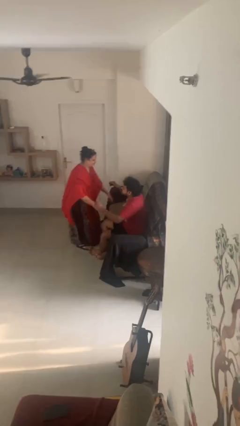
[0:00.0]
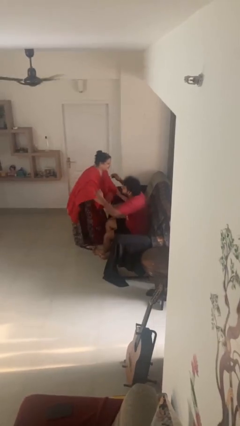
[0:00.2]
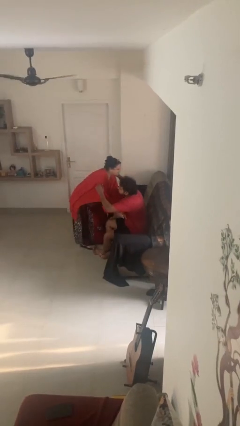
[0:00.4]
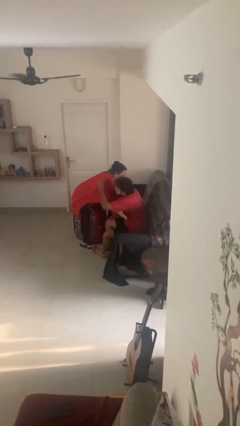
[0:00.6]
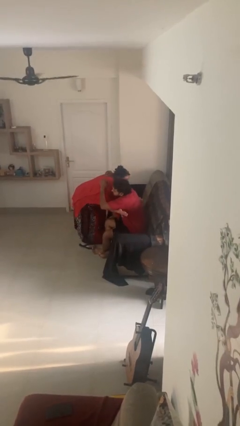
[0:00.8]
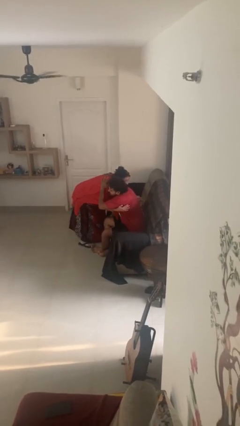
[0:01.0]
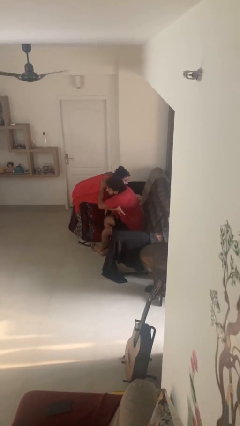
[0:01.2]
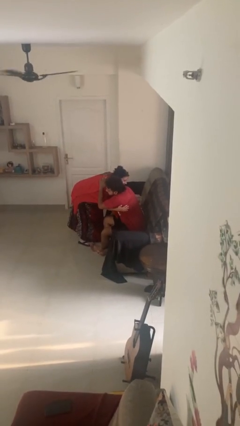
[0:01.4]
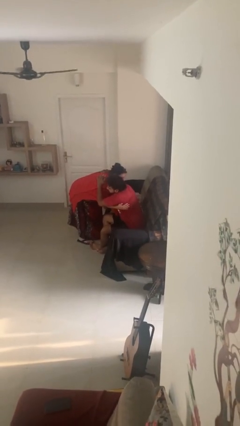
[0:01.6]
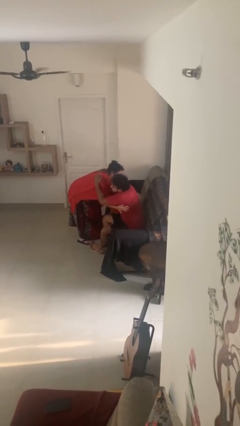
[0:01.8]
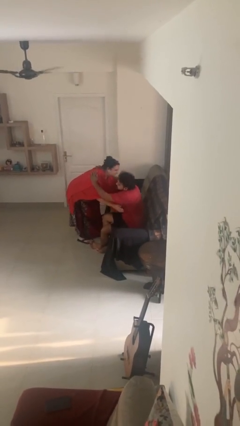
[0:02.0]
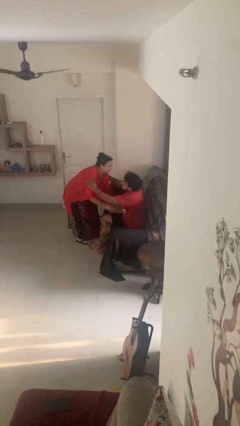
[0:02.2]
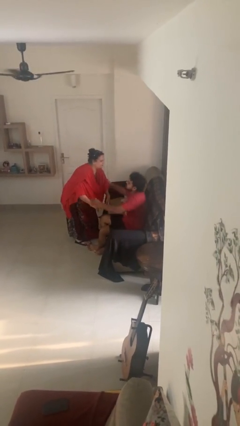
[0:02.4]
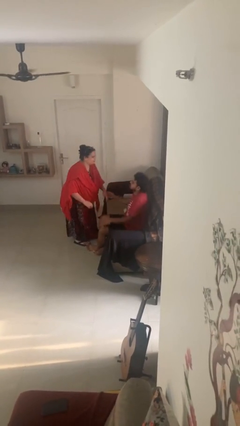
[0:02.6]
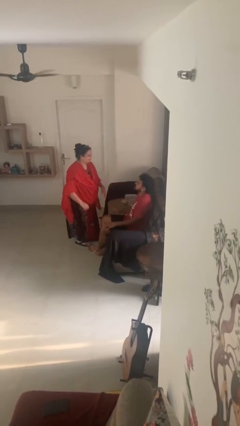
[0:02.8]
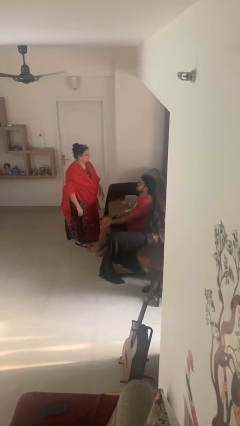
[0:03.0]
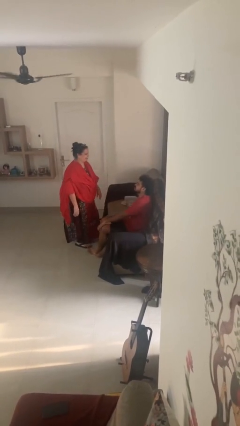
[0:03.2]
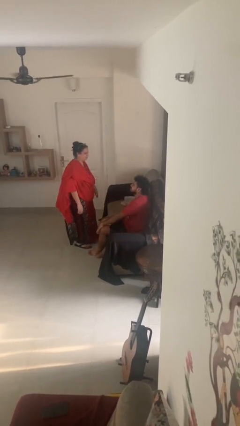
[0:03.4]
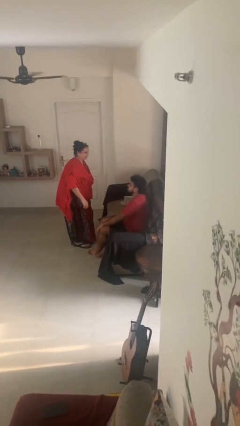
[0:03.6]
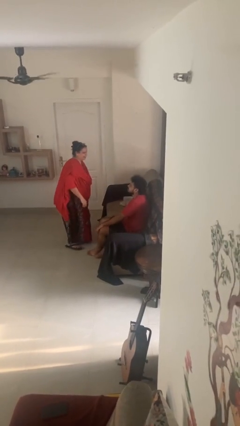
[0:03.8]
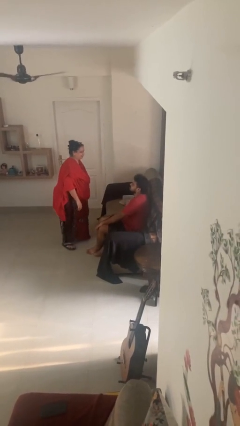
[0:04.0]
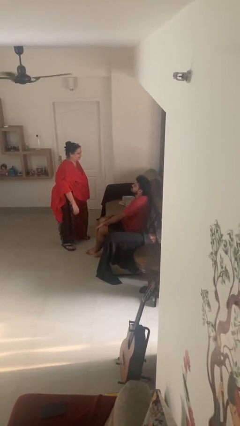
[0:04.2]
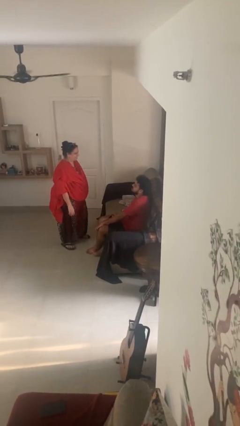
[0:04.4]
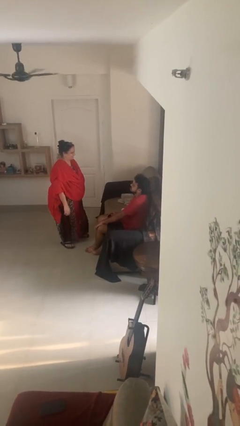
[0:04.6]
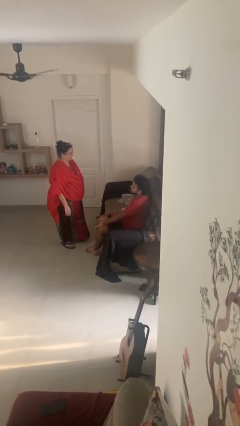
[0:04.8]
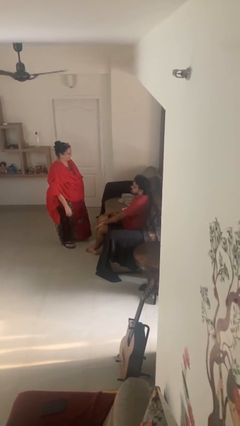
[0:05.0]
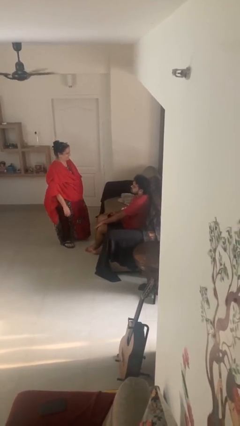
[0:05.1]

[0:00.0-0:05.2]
person embraces person

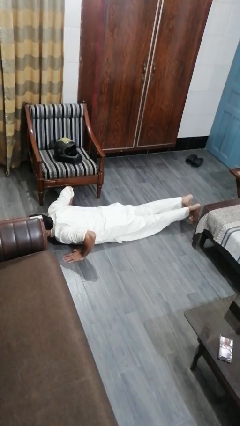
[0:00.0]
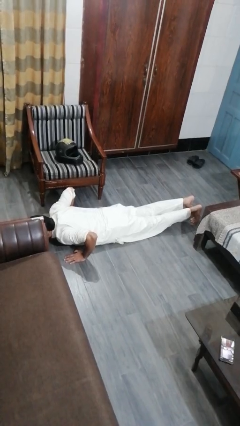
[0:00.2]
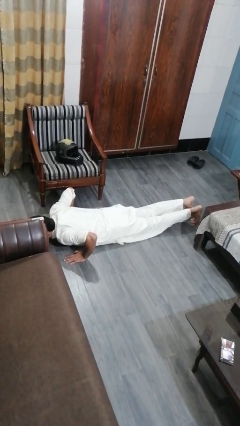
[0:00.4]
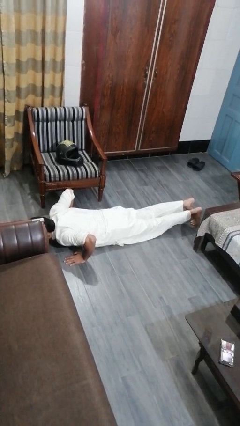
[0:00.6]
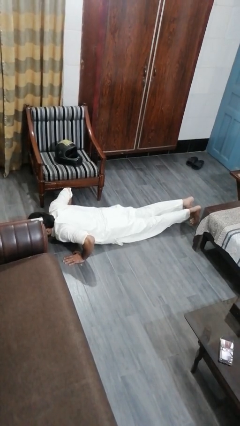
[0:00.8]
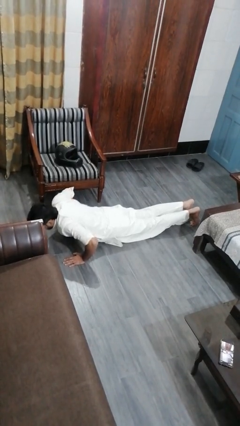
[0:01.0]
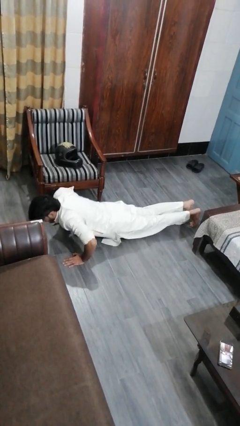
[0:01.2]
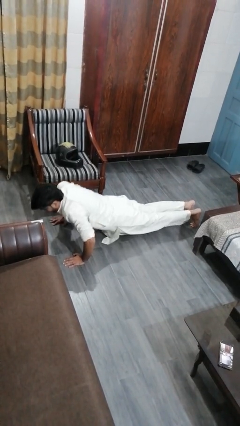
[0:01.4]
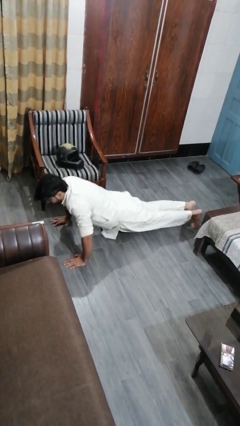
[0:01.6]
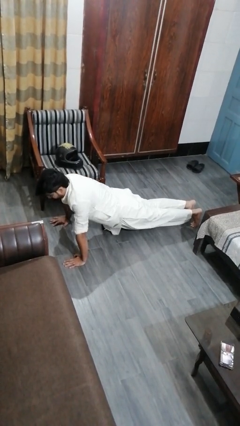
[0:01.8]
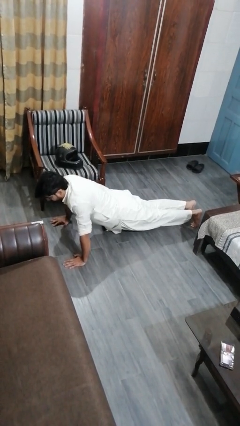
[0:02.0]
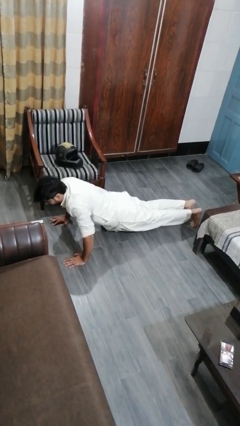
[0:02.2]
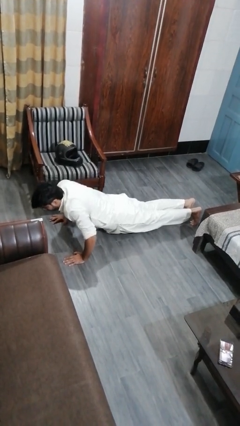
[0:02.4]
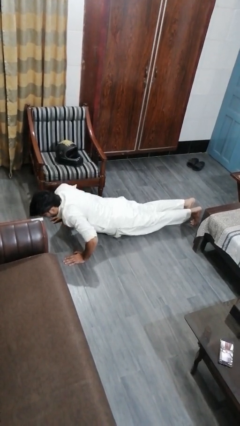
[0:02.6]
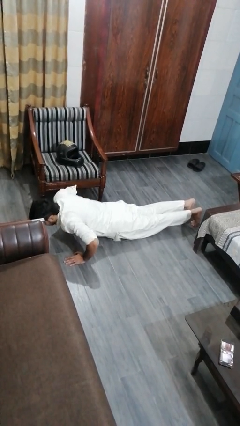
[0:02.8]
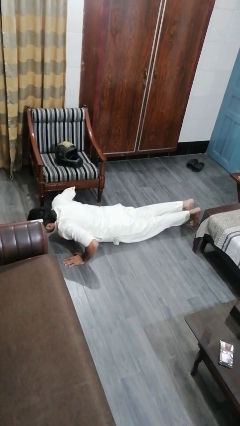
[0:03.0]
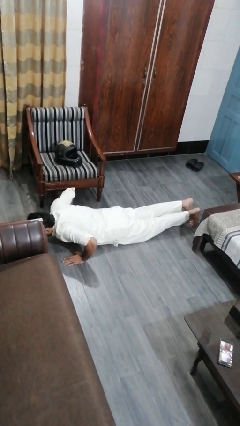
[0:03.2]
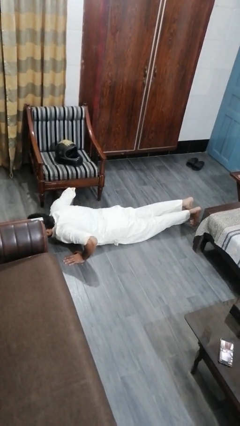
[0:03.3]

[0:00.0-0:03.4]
person exercises with pushup

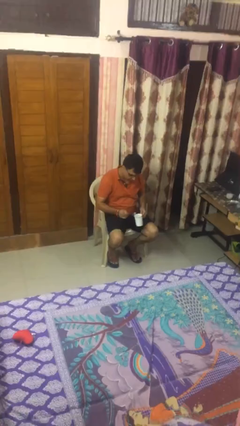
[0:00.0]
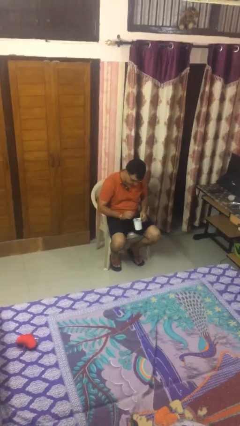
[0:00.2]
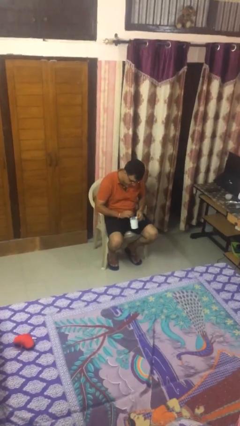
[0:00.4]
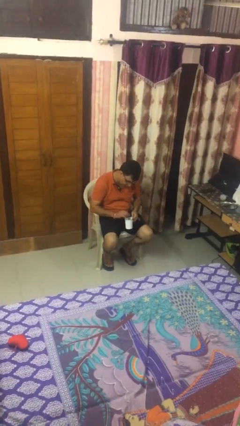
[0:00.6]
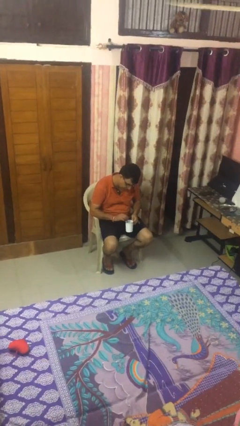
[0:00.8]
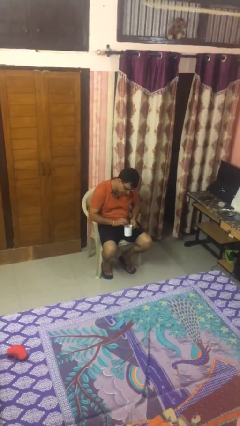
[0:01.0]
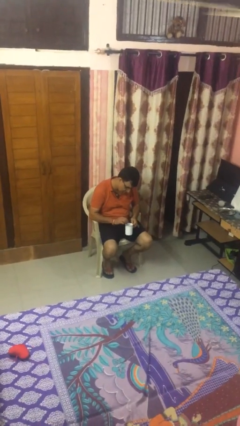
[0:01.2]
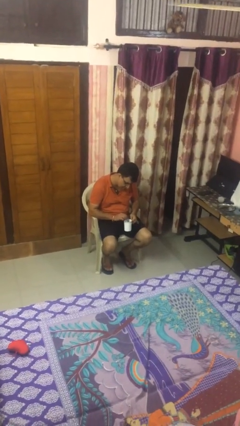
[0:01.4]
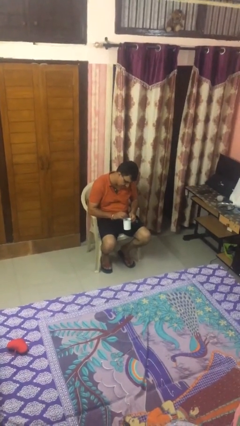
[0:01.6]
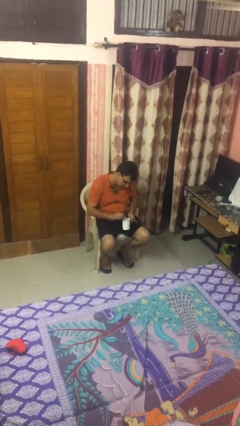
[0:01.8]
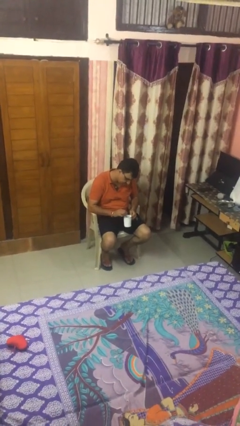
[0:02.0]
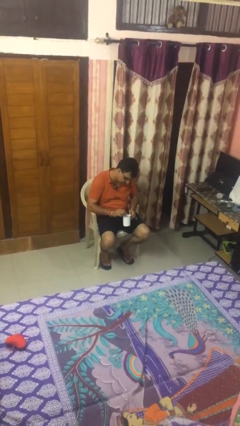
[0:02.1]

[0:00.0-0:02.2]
person stirs mug

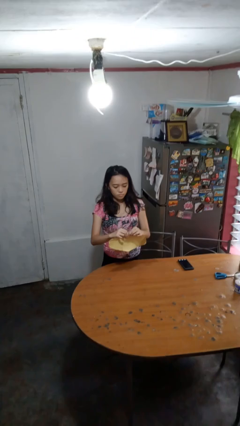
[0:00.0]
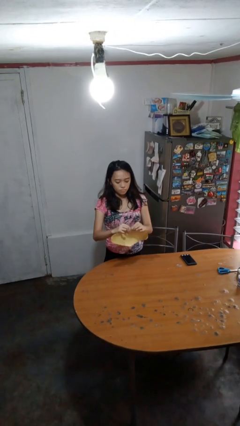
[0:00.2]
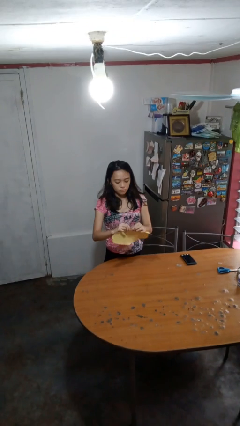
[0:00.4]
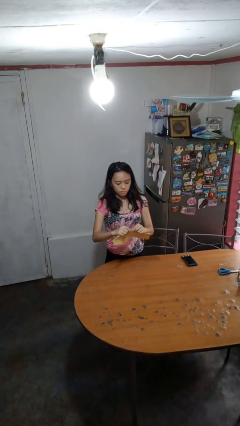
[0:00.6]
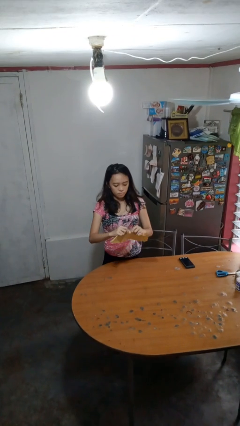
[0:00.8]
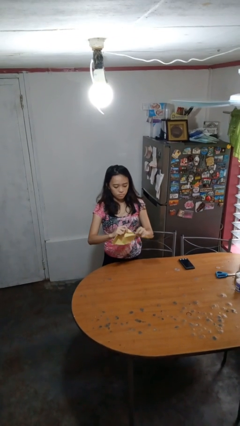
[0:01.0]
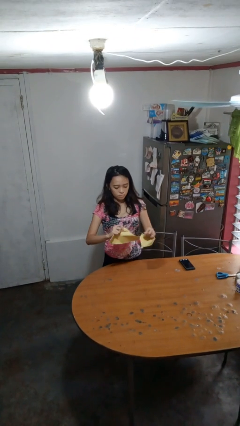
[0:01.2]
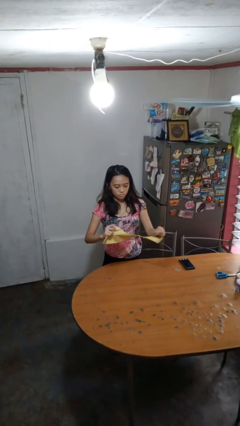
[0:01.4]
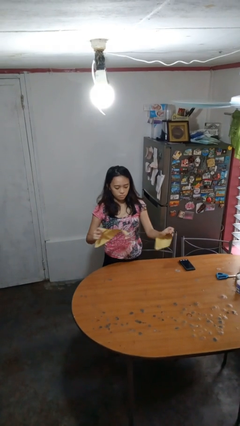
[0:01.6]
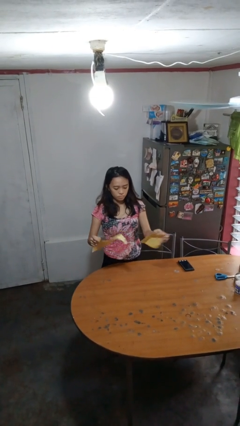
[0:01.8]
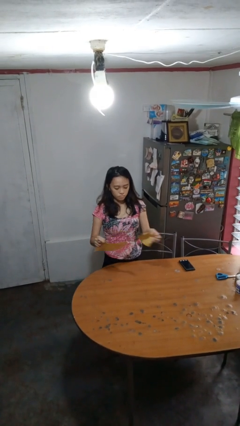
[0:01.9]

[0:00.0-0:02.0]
person tears paper

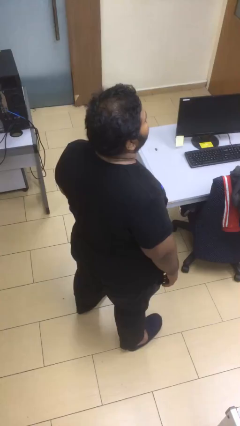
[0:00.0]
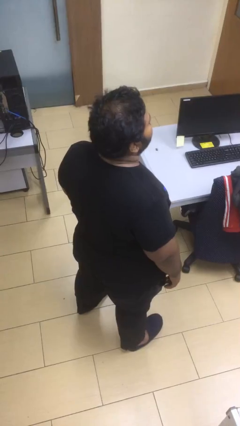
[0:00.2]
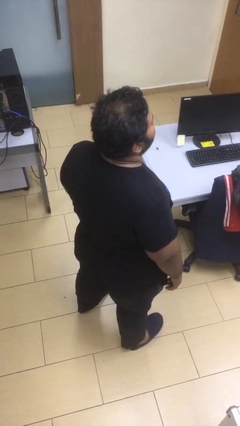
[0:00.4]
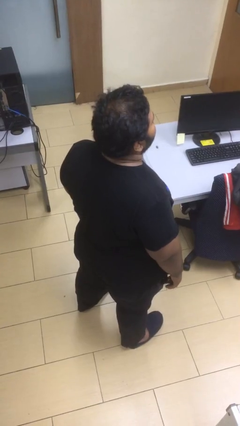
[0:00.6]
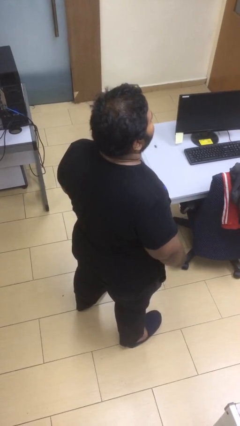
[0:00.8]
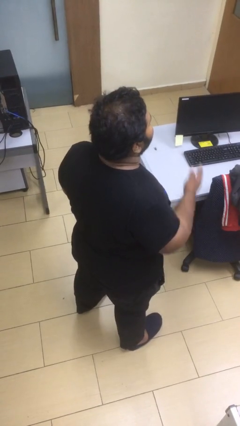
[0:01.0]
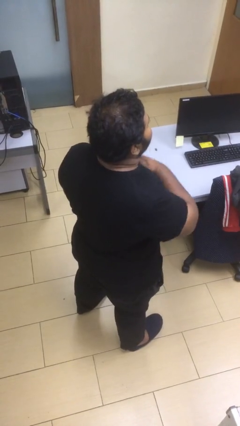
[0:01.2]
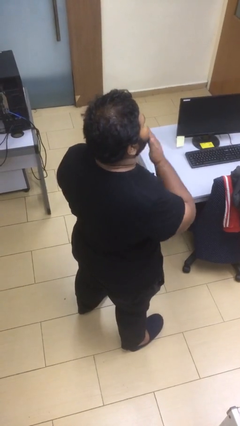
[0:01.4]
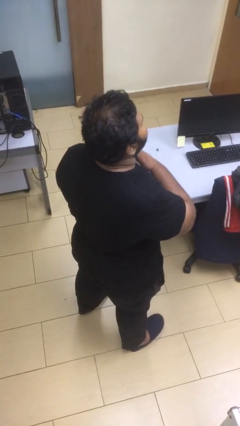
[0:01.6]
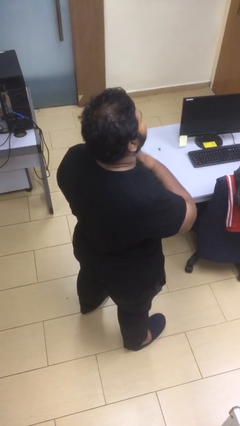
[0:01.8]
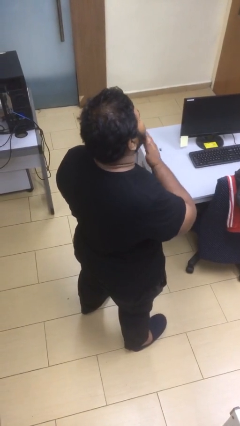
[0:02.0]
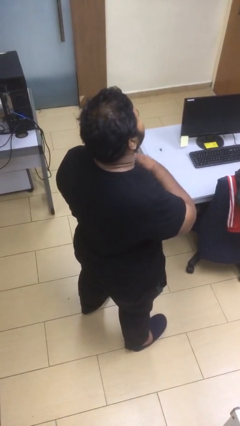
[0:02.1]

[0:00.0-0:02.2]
person drums on chest

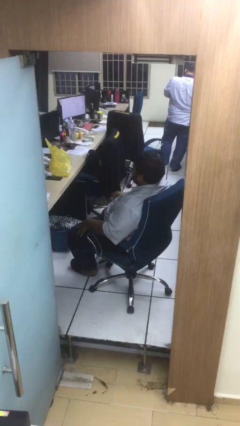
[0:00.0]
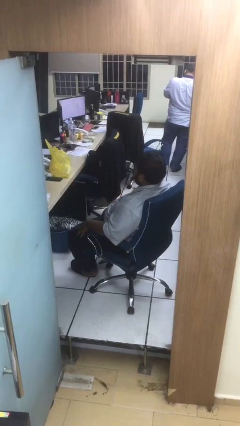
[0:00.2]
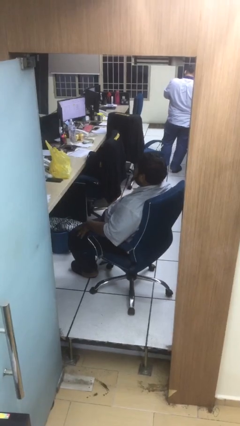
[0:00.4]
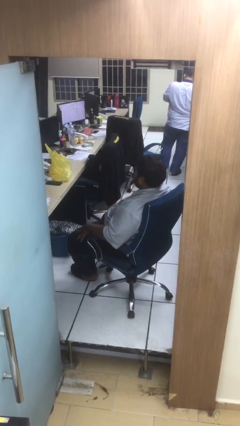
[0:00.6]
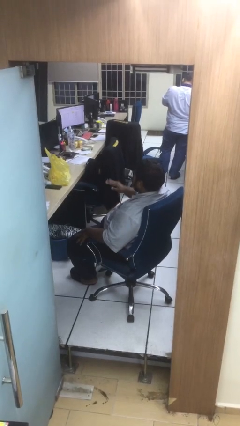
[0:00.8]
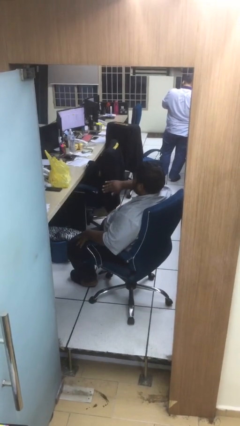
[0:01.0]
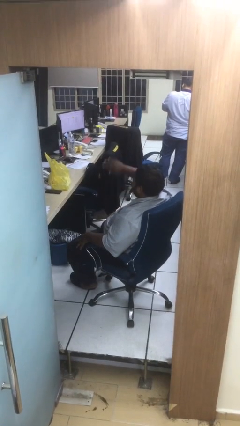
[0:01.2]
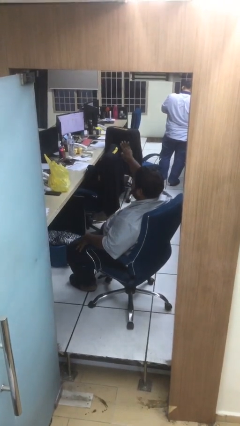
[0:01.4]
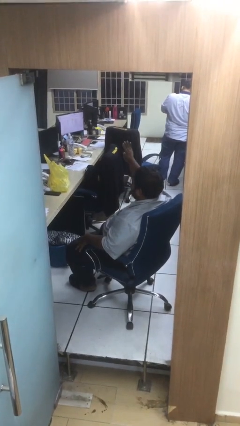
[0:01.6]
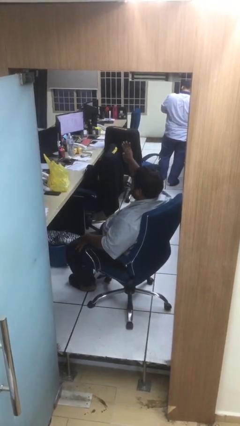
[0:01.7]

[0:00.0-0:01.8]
person gestures swipe up

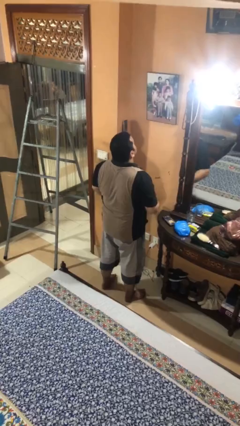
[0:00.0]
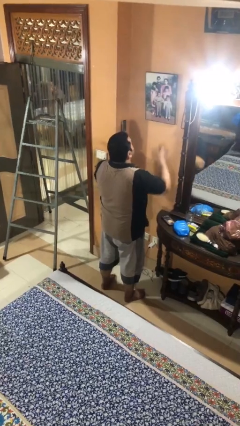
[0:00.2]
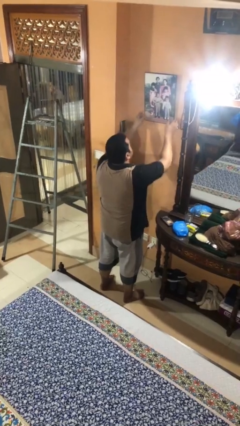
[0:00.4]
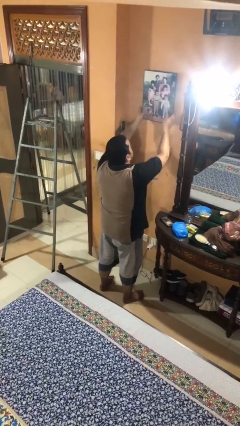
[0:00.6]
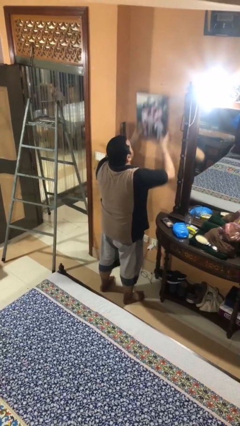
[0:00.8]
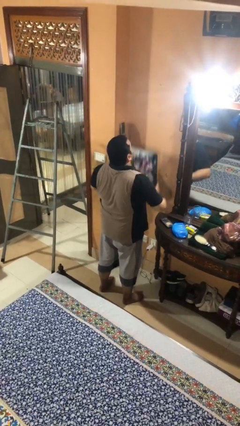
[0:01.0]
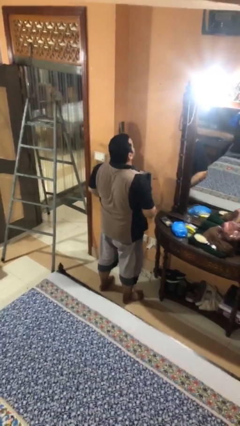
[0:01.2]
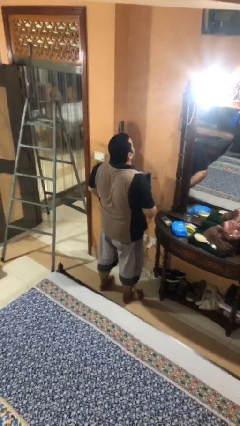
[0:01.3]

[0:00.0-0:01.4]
person takes down picture frame
